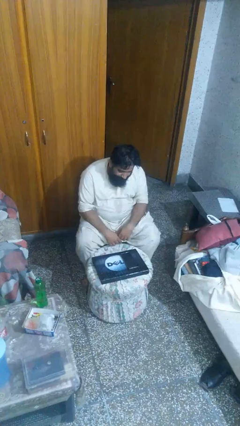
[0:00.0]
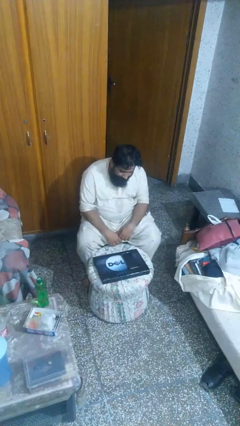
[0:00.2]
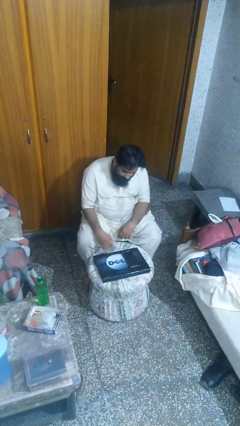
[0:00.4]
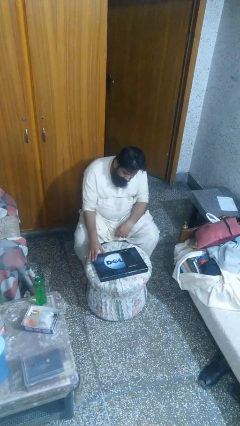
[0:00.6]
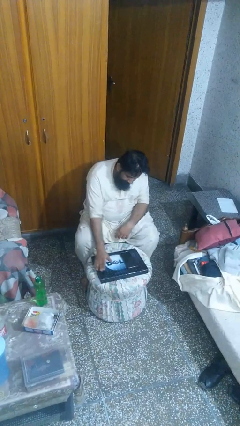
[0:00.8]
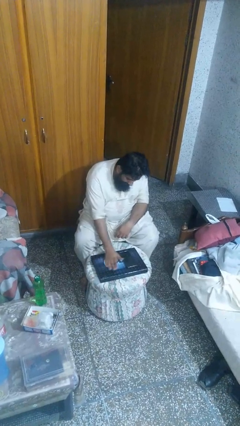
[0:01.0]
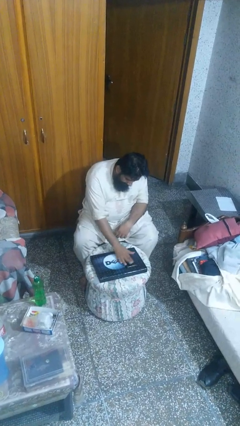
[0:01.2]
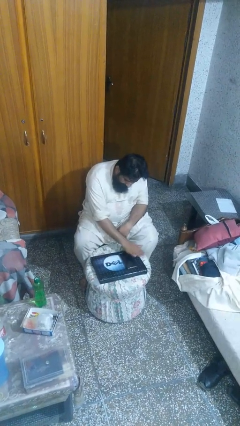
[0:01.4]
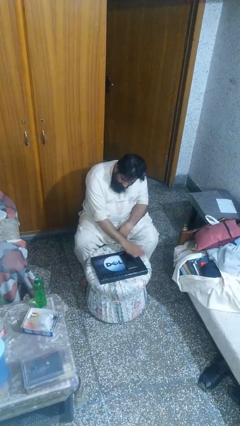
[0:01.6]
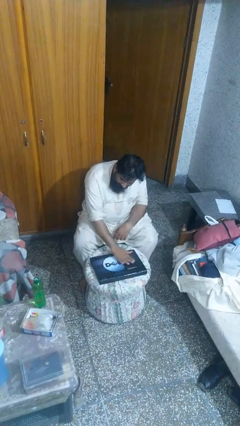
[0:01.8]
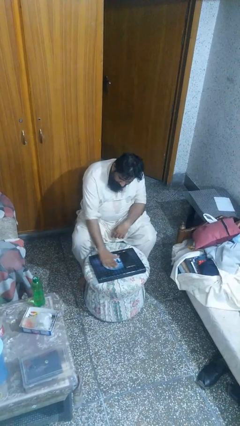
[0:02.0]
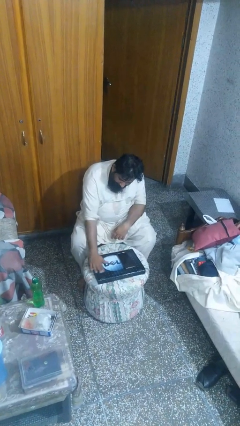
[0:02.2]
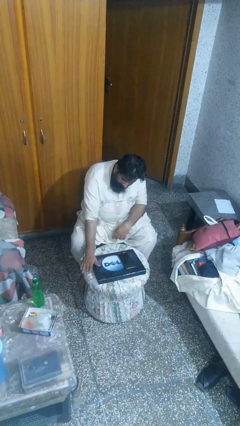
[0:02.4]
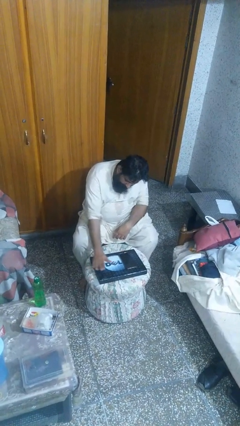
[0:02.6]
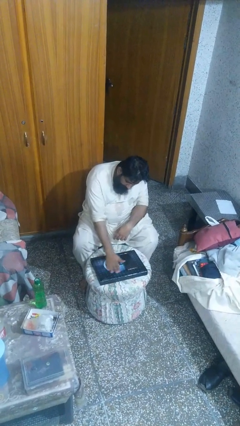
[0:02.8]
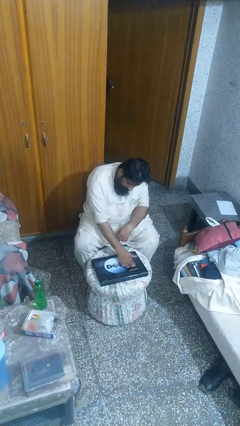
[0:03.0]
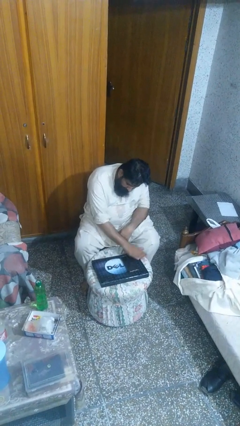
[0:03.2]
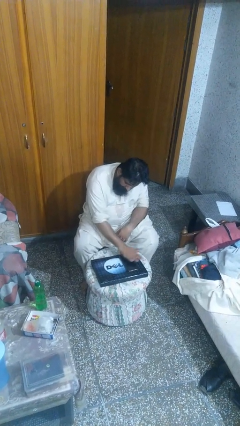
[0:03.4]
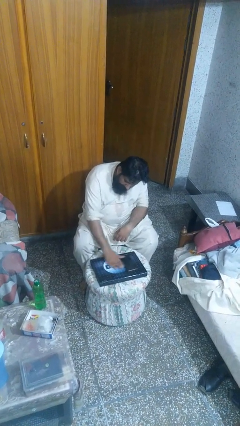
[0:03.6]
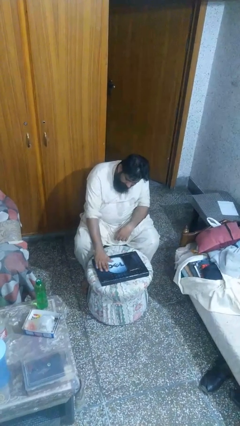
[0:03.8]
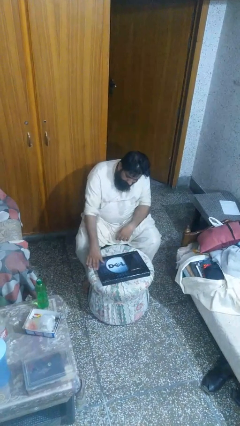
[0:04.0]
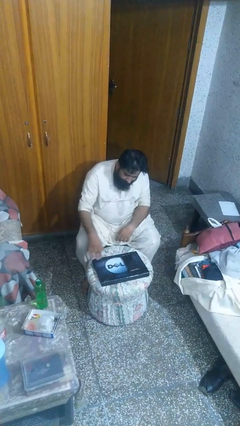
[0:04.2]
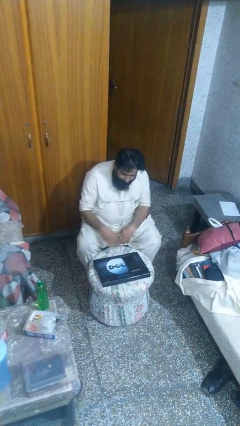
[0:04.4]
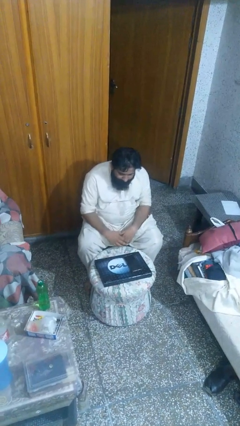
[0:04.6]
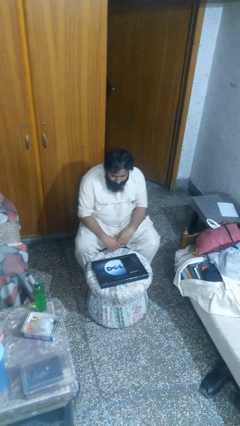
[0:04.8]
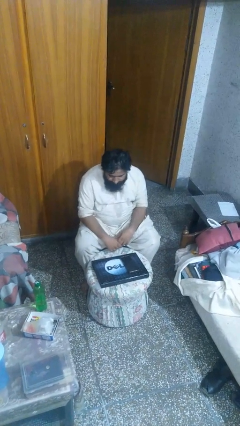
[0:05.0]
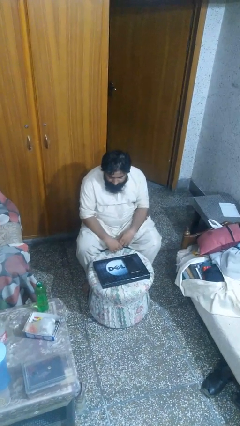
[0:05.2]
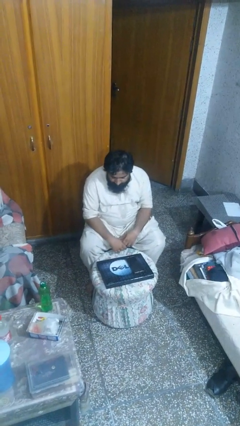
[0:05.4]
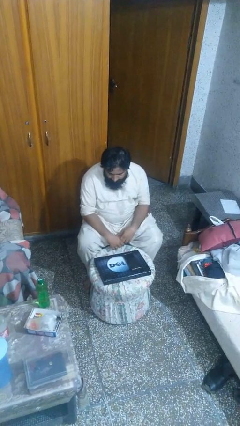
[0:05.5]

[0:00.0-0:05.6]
person waves hand over object

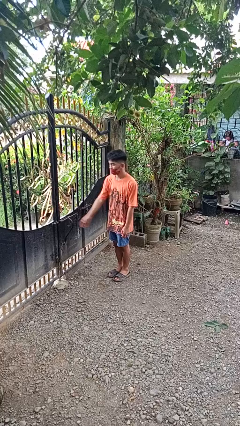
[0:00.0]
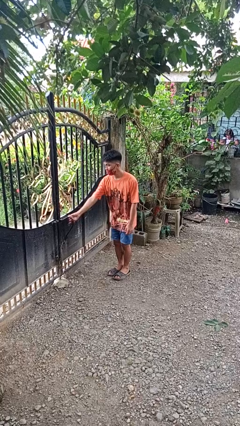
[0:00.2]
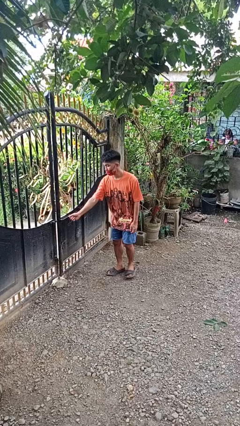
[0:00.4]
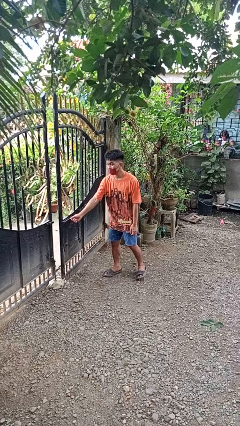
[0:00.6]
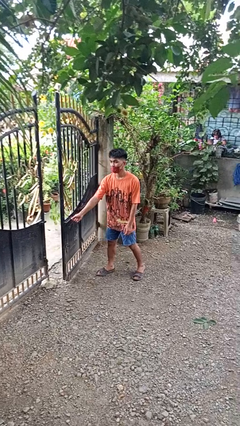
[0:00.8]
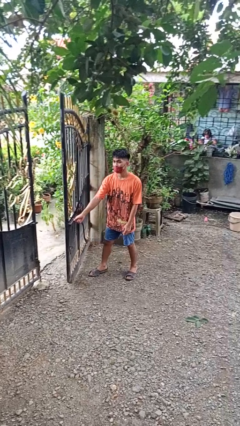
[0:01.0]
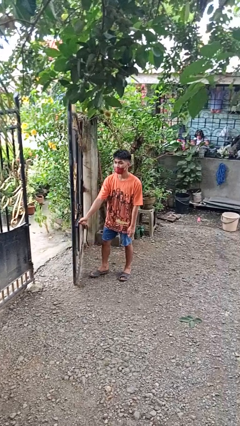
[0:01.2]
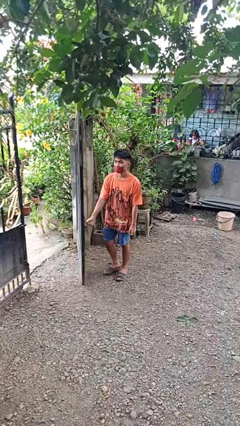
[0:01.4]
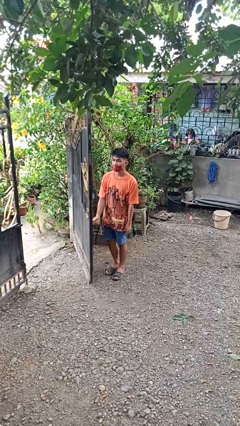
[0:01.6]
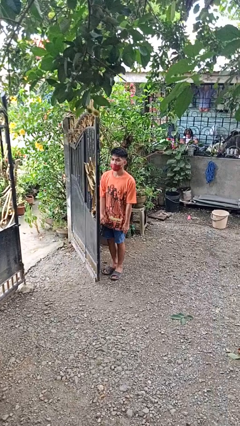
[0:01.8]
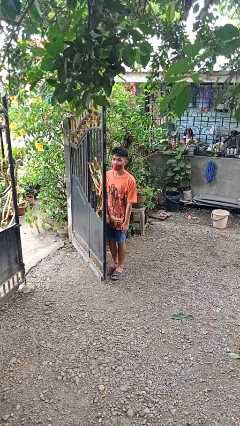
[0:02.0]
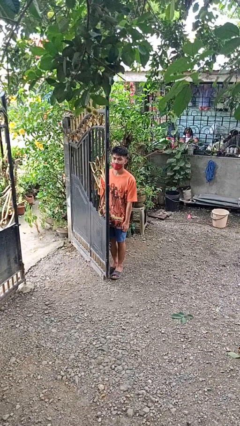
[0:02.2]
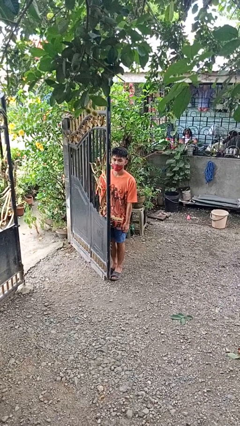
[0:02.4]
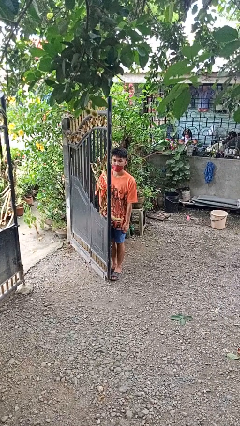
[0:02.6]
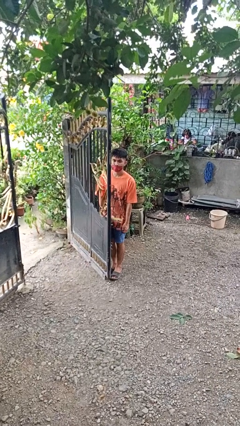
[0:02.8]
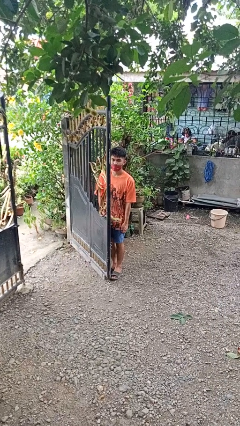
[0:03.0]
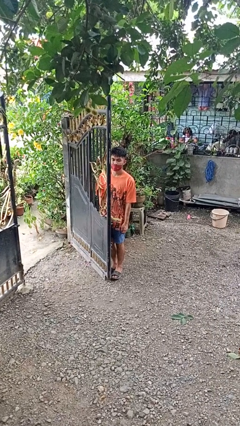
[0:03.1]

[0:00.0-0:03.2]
person opens gate

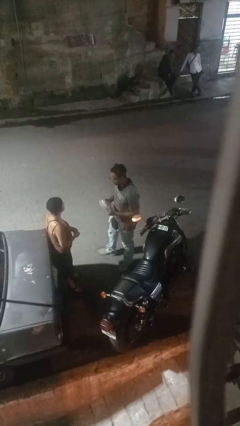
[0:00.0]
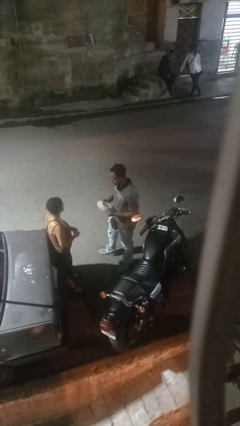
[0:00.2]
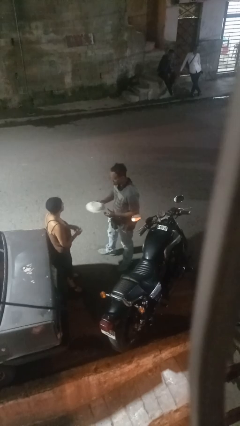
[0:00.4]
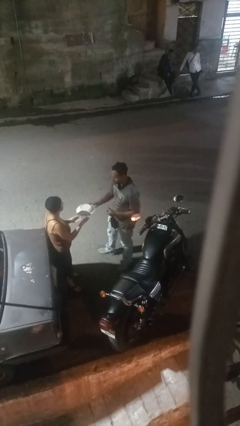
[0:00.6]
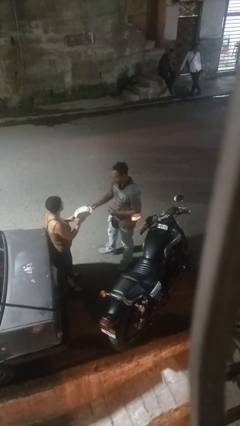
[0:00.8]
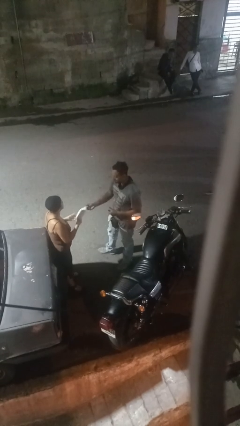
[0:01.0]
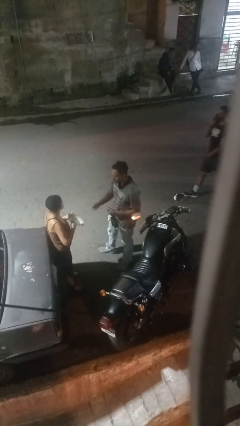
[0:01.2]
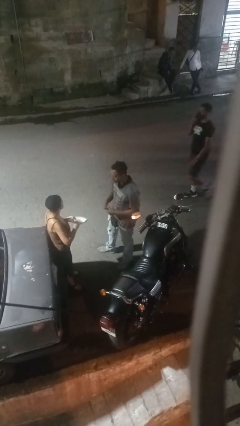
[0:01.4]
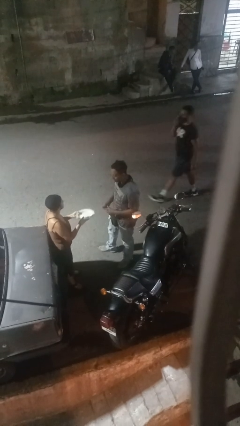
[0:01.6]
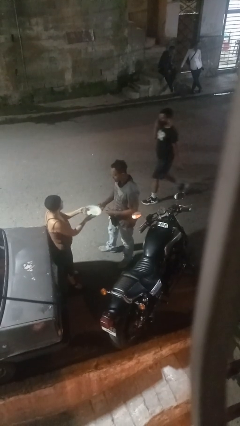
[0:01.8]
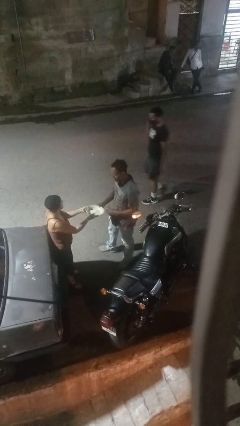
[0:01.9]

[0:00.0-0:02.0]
person transfers object to person

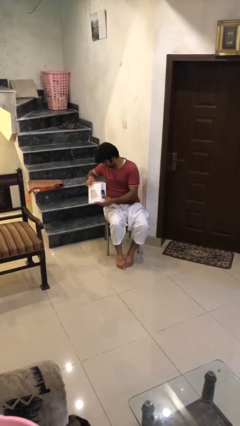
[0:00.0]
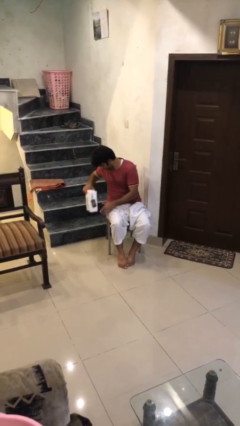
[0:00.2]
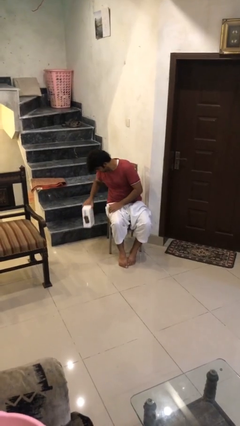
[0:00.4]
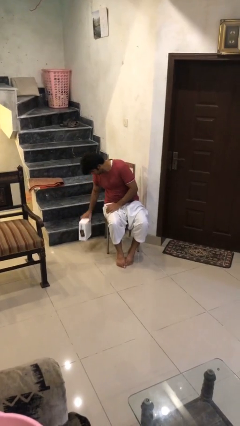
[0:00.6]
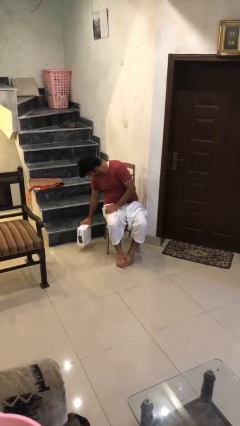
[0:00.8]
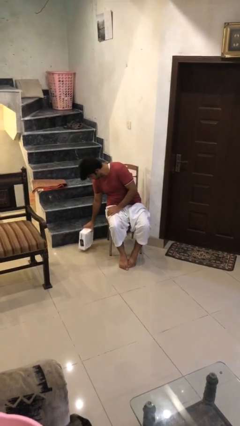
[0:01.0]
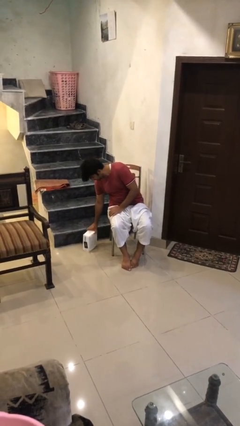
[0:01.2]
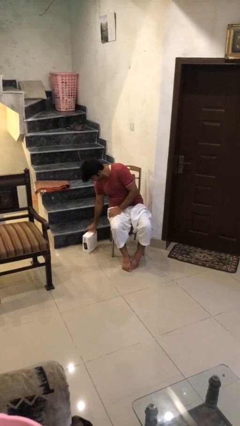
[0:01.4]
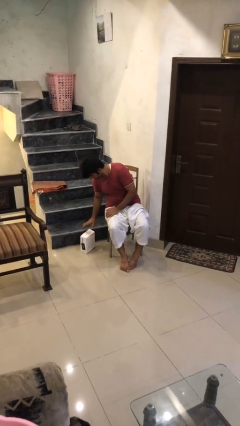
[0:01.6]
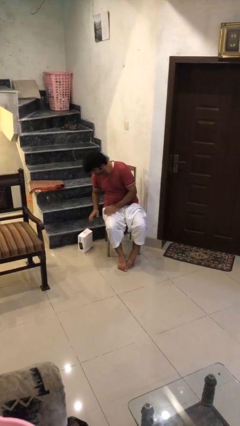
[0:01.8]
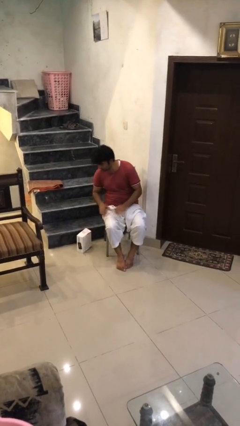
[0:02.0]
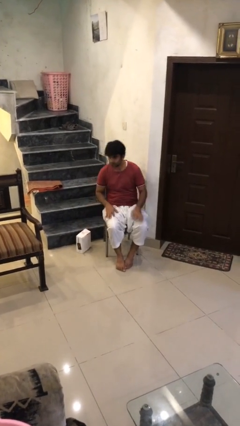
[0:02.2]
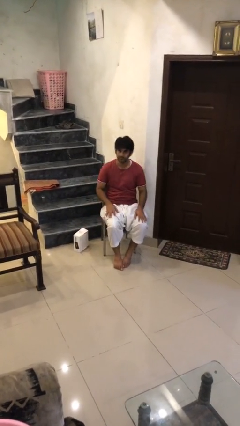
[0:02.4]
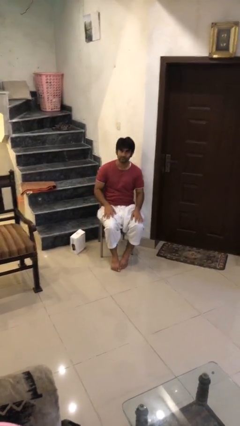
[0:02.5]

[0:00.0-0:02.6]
person puts down object on floor

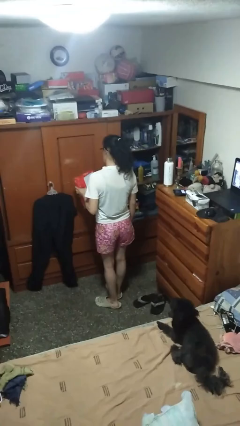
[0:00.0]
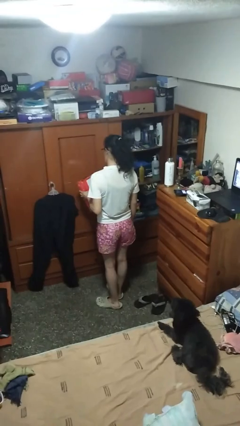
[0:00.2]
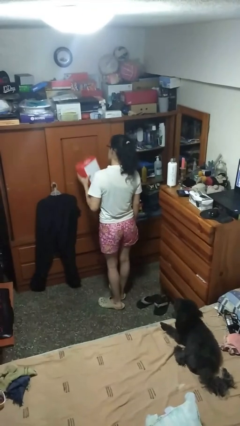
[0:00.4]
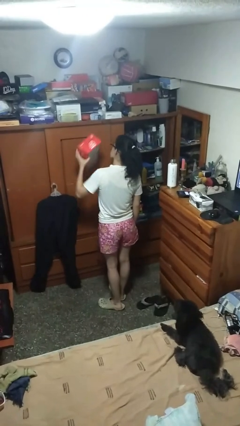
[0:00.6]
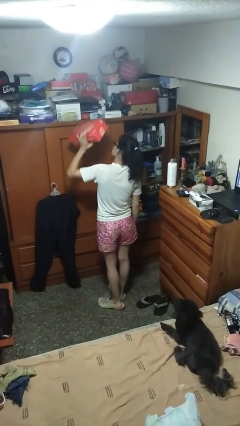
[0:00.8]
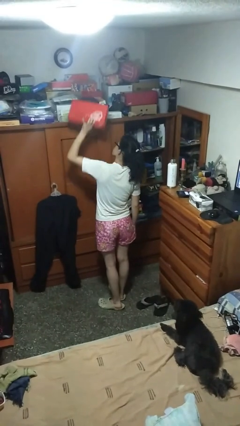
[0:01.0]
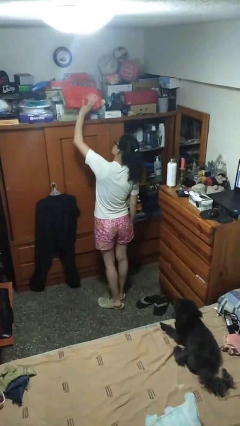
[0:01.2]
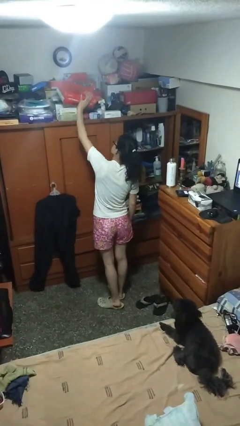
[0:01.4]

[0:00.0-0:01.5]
person puts down object on shelf

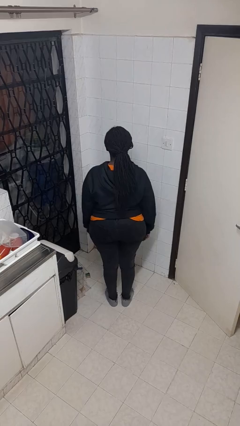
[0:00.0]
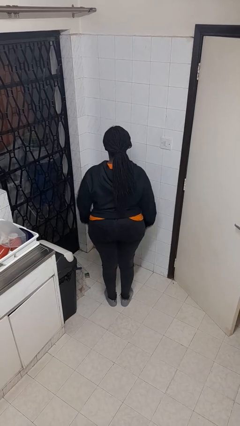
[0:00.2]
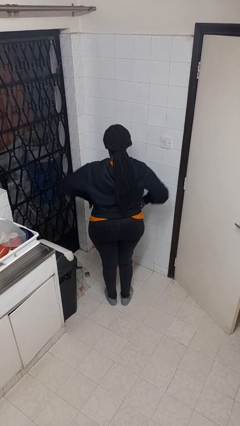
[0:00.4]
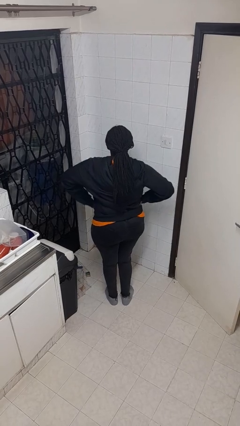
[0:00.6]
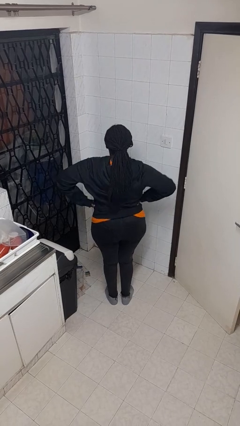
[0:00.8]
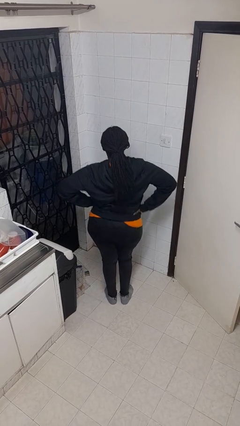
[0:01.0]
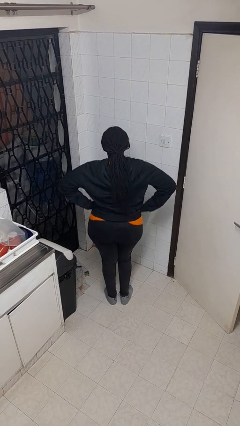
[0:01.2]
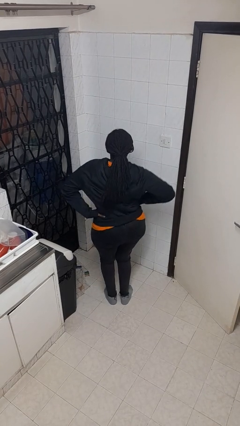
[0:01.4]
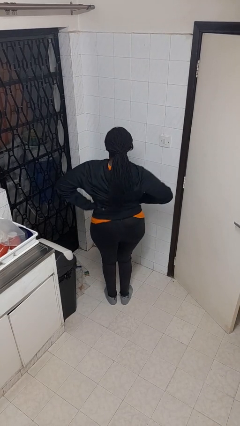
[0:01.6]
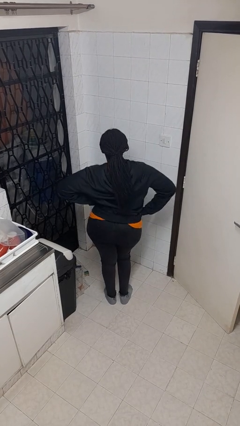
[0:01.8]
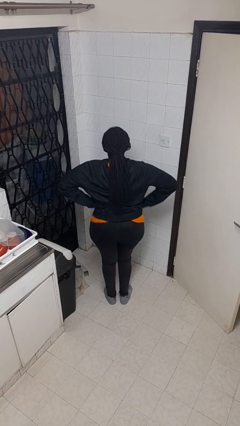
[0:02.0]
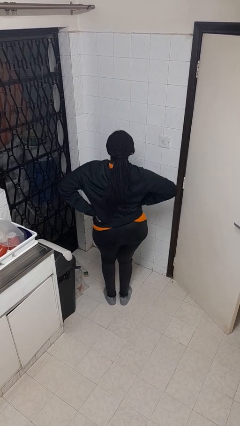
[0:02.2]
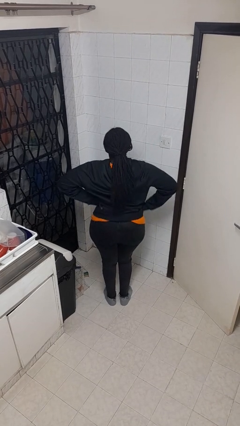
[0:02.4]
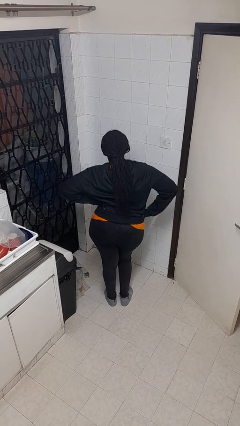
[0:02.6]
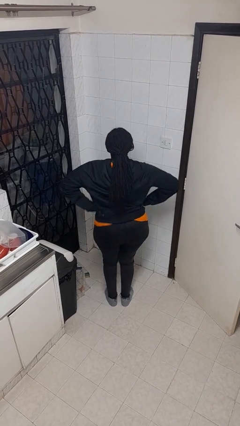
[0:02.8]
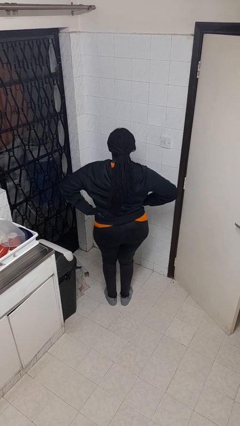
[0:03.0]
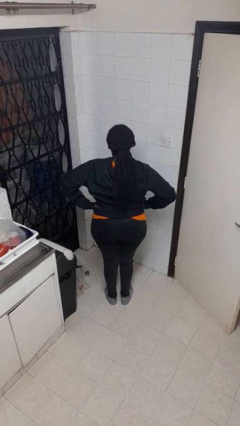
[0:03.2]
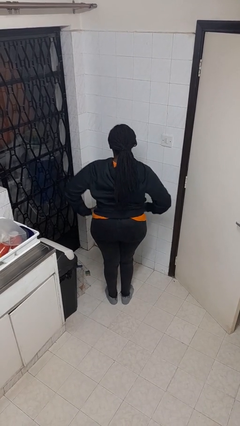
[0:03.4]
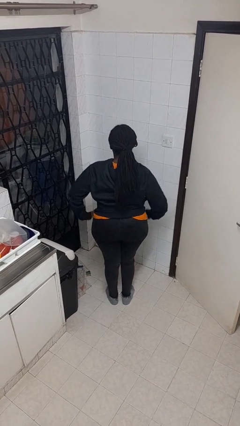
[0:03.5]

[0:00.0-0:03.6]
person dances in place
